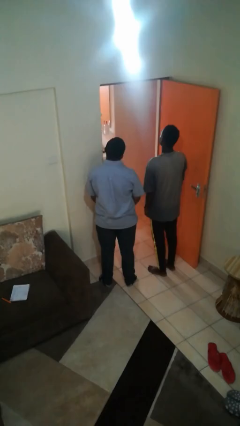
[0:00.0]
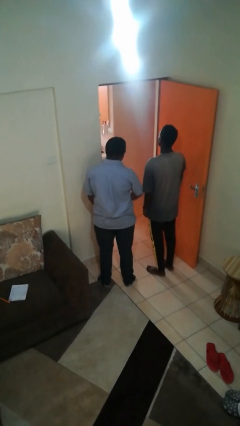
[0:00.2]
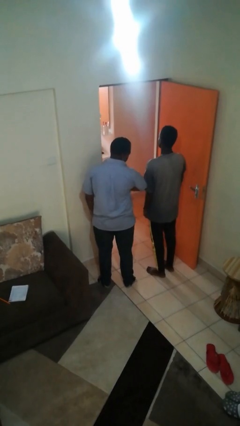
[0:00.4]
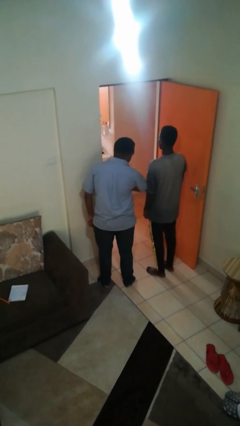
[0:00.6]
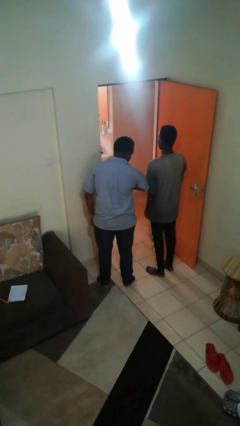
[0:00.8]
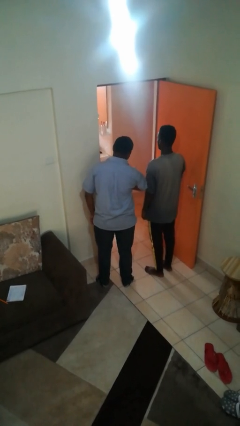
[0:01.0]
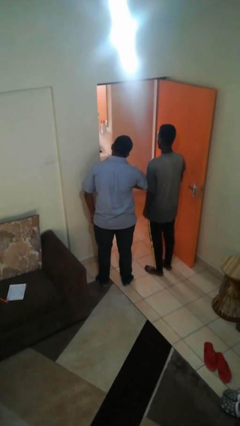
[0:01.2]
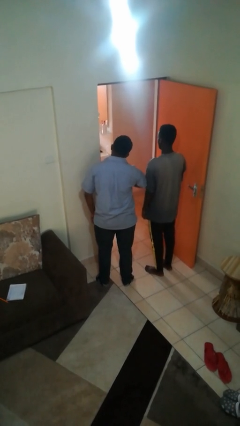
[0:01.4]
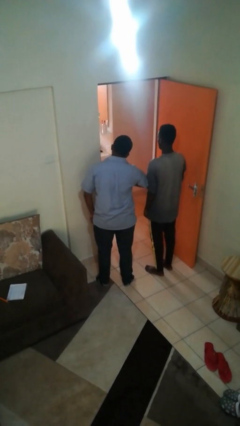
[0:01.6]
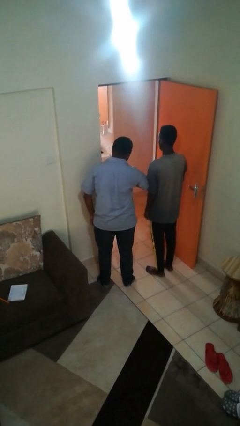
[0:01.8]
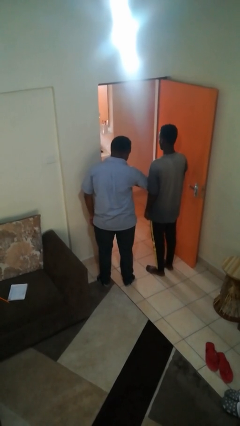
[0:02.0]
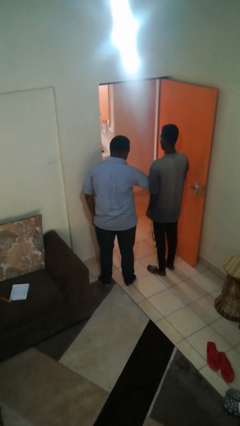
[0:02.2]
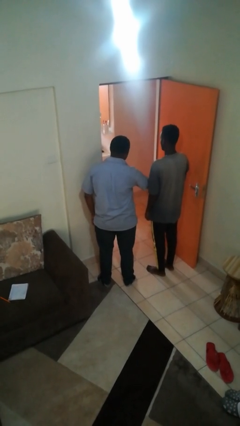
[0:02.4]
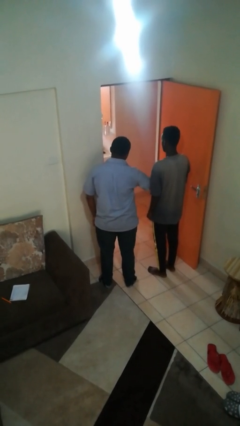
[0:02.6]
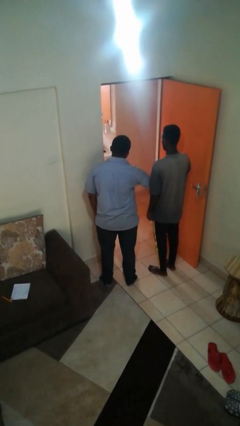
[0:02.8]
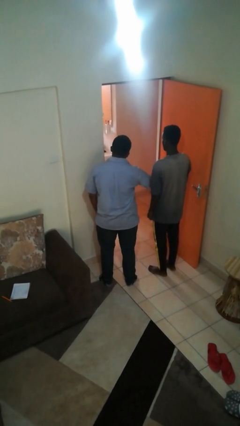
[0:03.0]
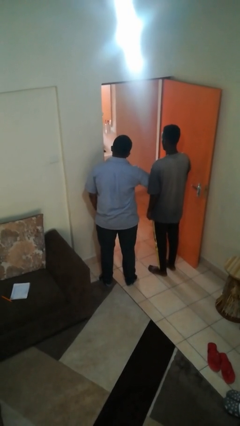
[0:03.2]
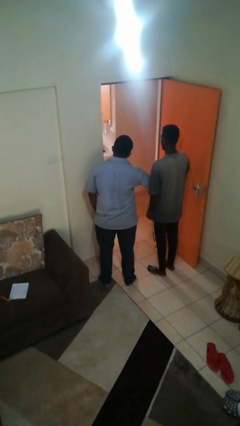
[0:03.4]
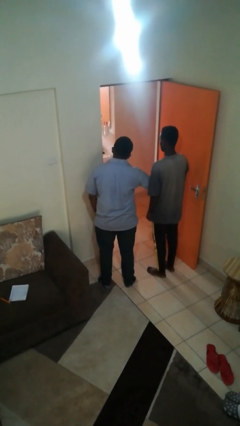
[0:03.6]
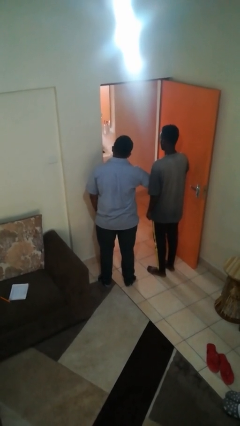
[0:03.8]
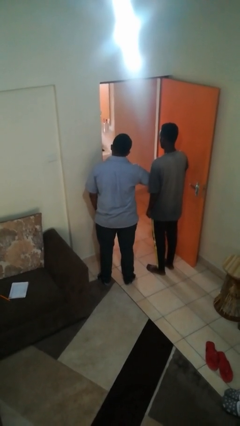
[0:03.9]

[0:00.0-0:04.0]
person nudges person with elbow

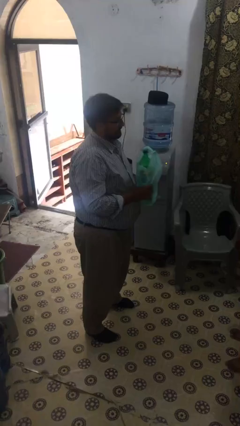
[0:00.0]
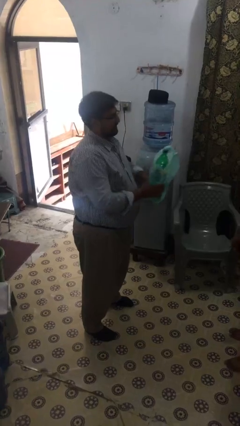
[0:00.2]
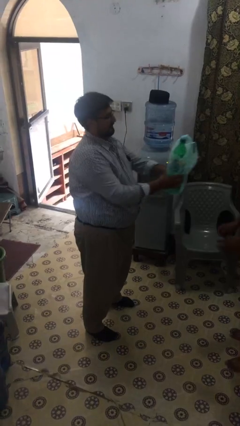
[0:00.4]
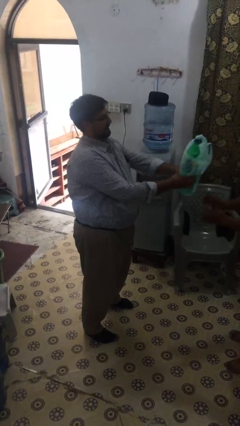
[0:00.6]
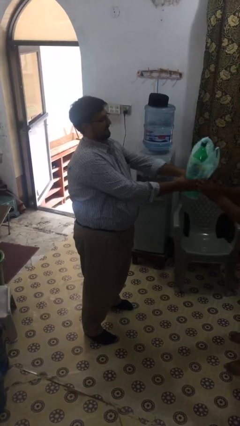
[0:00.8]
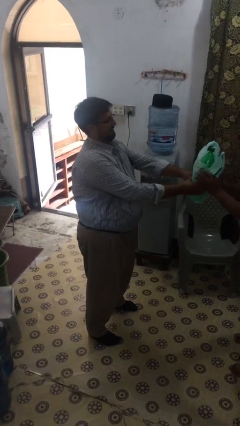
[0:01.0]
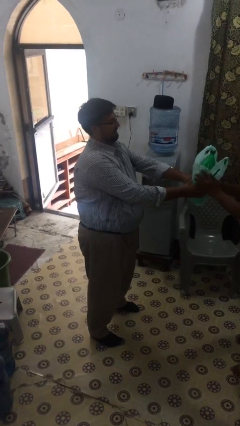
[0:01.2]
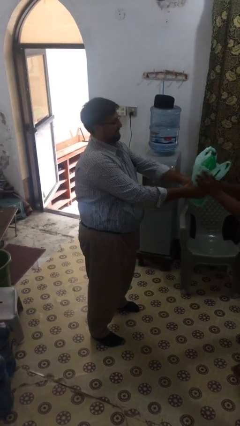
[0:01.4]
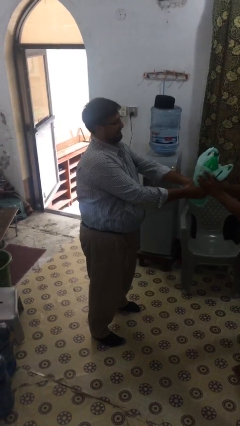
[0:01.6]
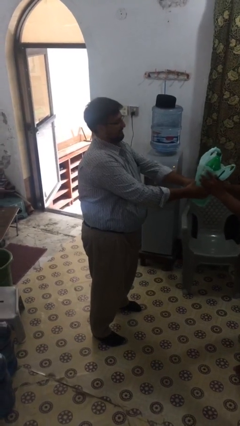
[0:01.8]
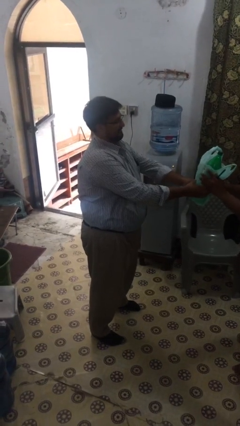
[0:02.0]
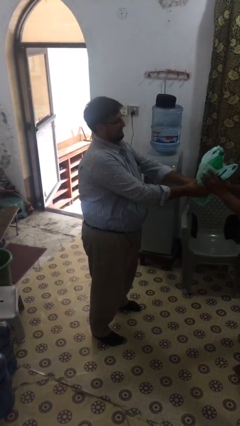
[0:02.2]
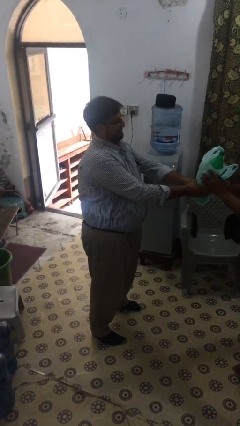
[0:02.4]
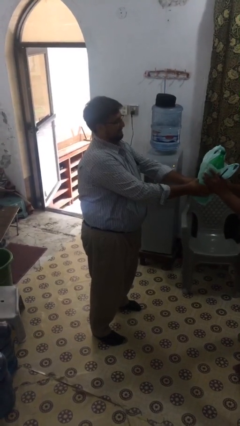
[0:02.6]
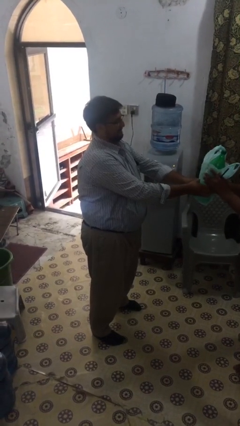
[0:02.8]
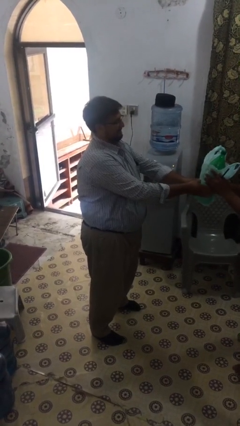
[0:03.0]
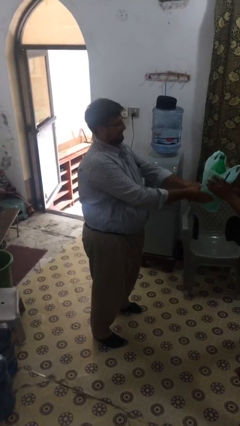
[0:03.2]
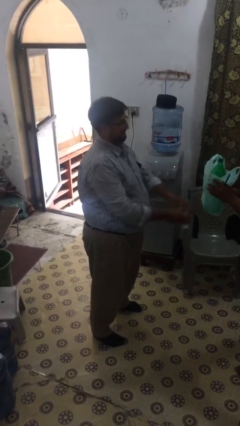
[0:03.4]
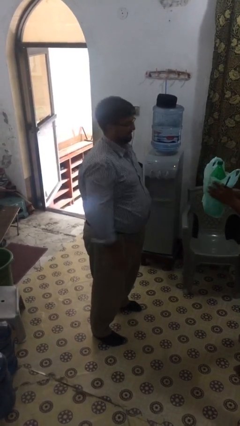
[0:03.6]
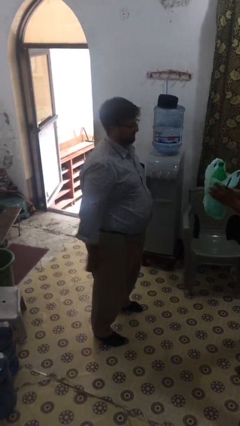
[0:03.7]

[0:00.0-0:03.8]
person transfers object to person

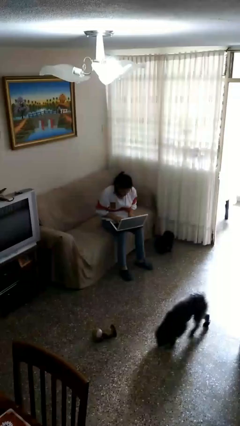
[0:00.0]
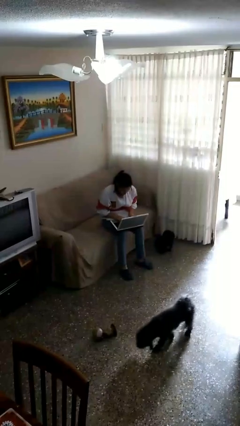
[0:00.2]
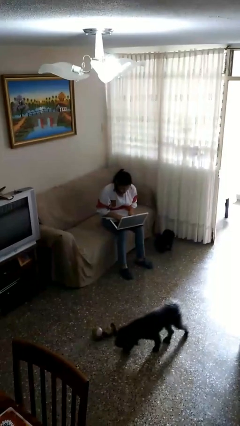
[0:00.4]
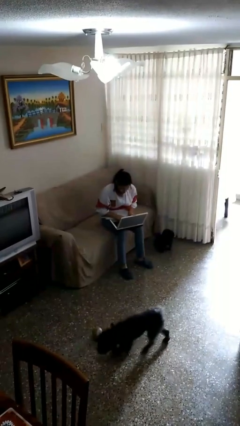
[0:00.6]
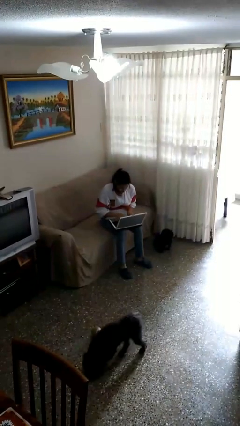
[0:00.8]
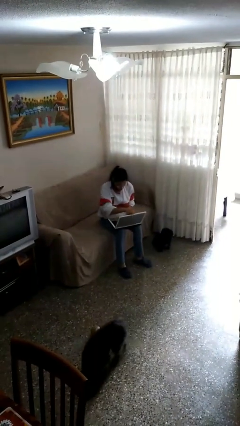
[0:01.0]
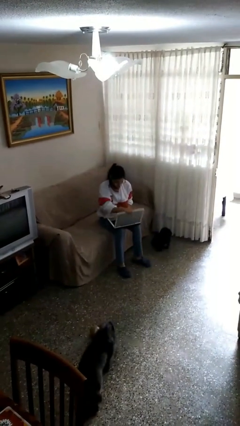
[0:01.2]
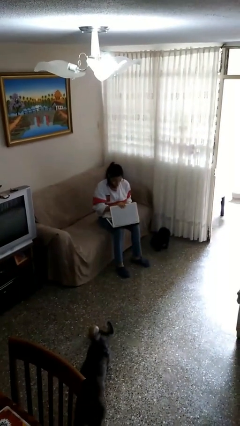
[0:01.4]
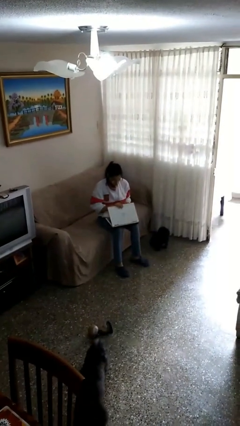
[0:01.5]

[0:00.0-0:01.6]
person interacts with laptop

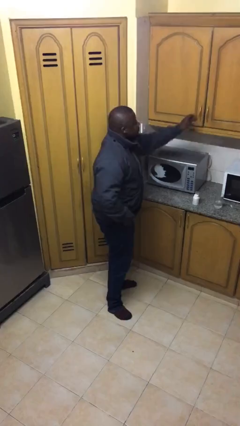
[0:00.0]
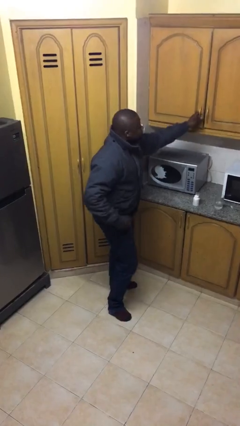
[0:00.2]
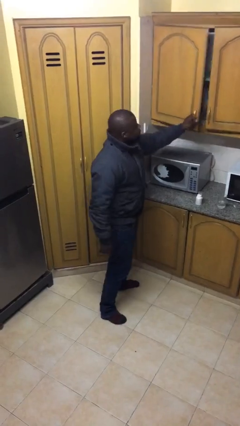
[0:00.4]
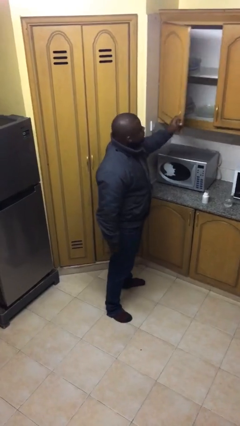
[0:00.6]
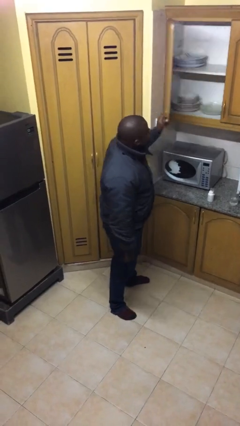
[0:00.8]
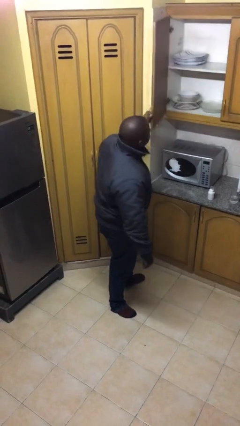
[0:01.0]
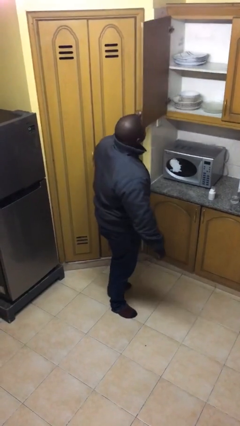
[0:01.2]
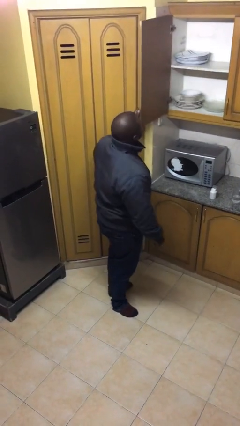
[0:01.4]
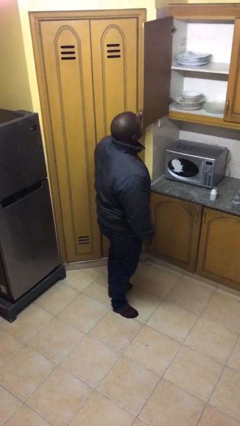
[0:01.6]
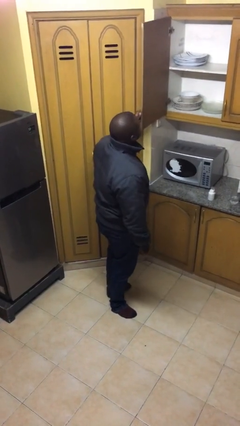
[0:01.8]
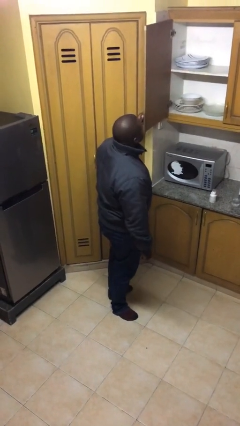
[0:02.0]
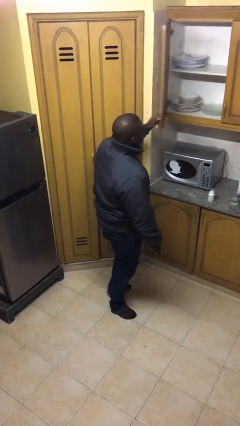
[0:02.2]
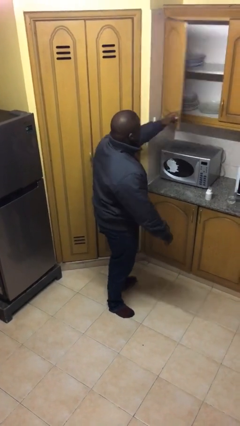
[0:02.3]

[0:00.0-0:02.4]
person closes cabinet

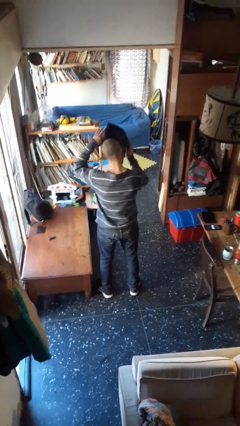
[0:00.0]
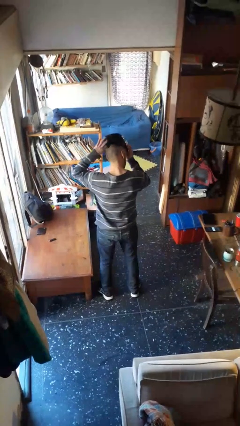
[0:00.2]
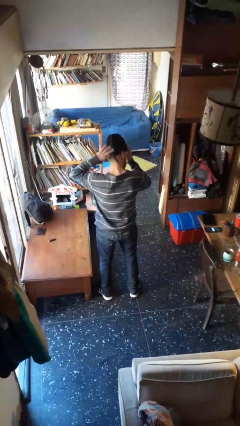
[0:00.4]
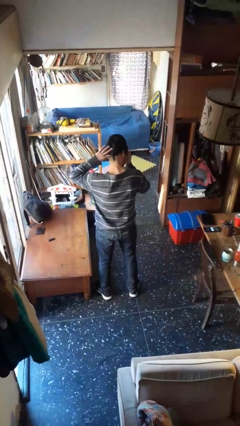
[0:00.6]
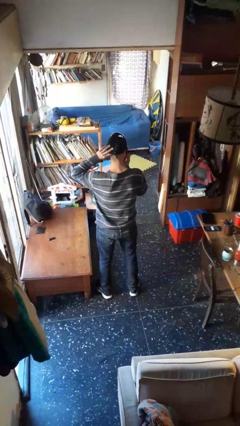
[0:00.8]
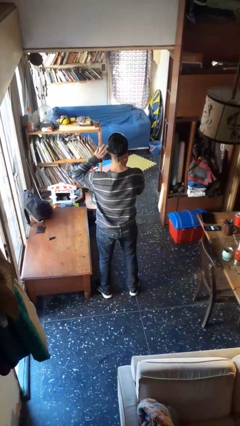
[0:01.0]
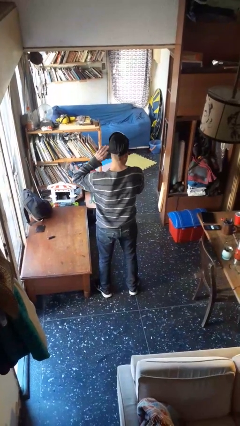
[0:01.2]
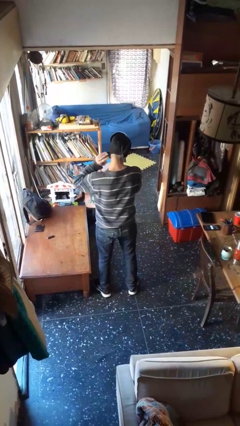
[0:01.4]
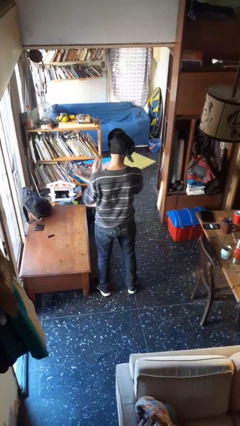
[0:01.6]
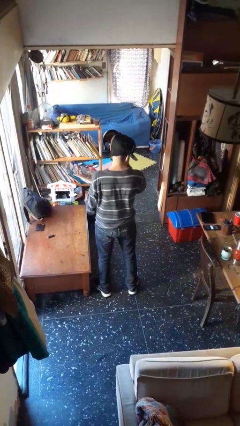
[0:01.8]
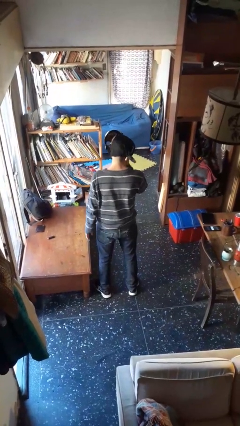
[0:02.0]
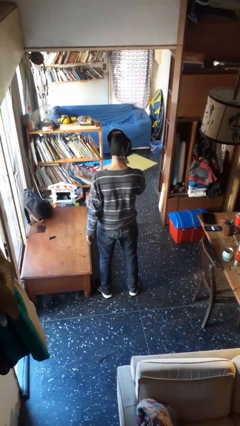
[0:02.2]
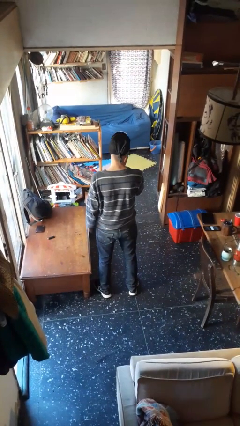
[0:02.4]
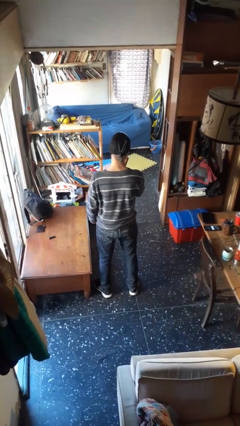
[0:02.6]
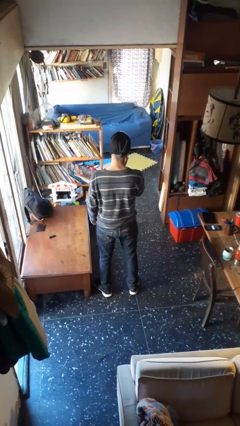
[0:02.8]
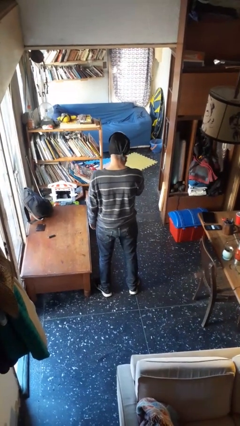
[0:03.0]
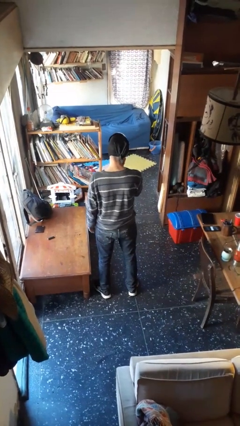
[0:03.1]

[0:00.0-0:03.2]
person puts on facemask

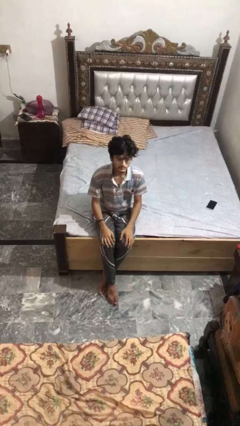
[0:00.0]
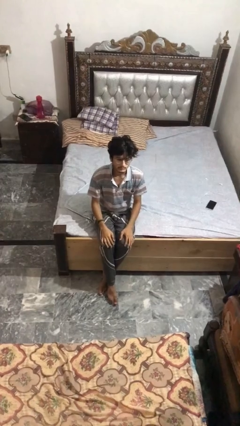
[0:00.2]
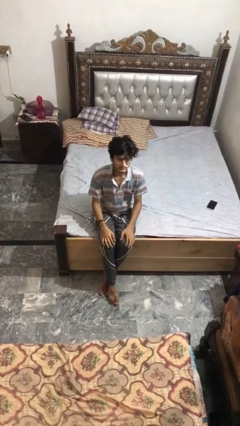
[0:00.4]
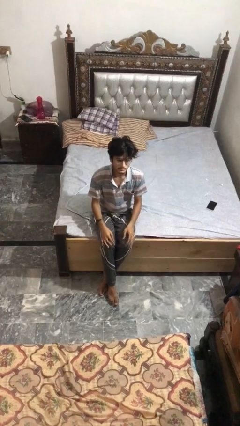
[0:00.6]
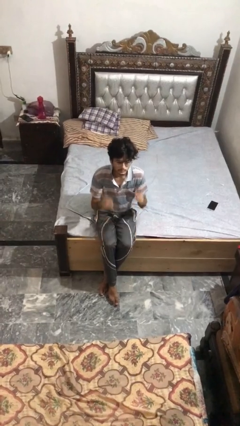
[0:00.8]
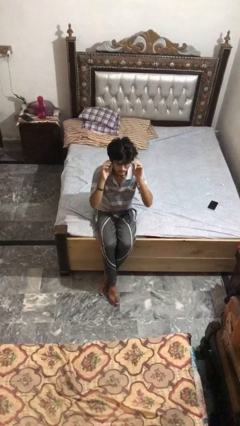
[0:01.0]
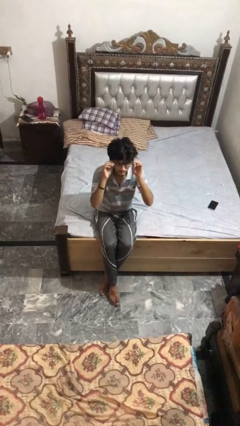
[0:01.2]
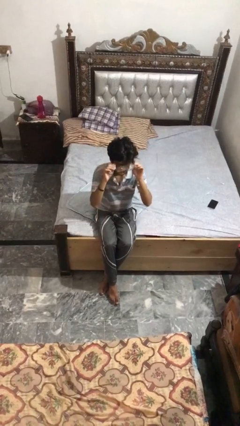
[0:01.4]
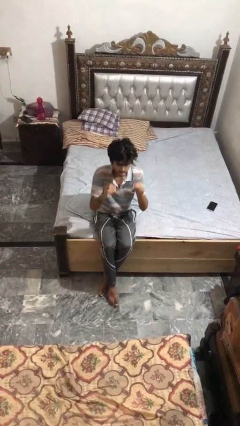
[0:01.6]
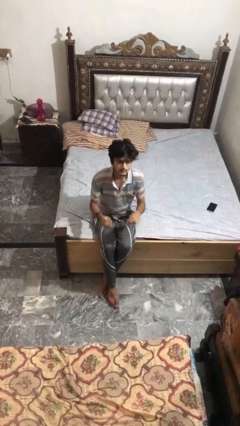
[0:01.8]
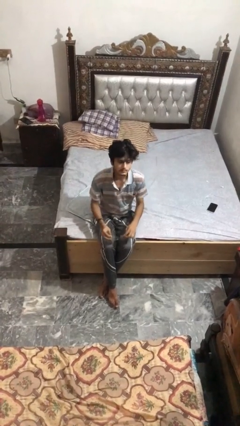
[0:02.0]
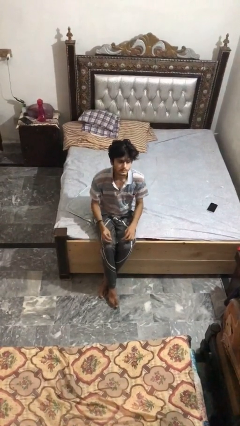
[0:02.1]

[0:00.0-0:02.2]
person takes off glasses

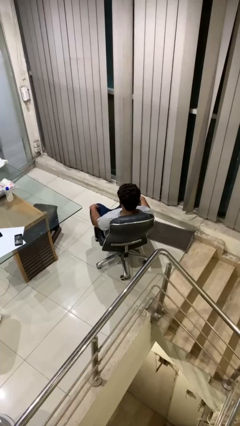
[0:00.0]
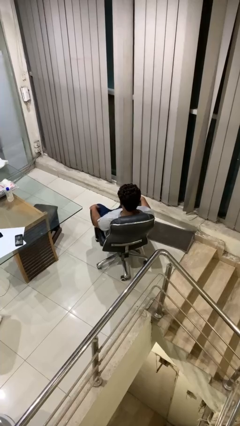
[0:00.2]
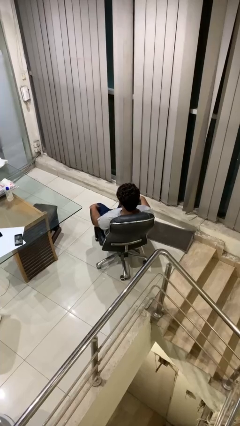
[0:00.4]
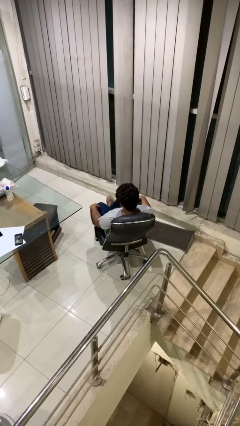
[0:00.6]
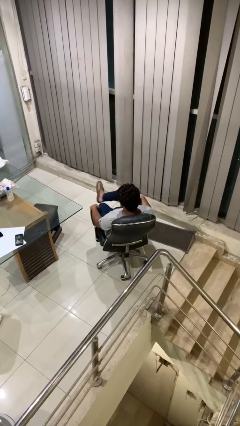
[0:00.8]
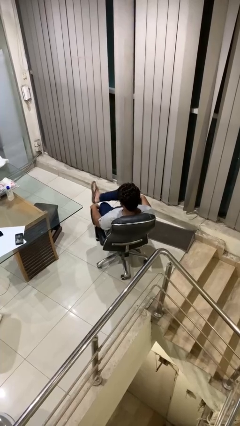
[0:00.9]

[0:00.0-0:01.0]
person crosses legs
